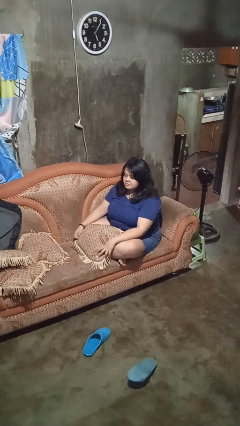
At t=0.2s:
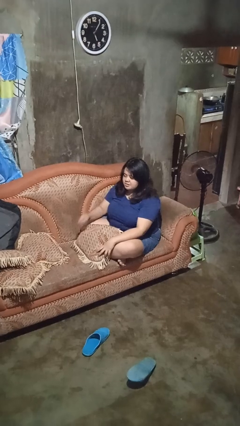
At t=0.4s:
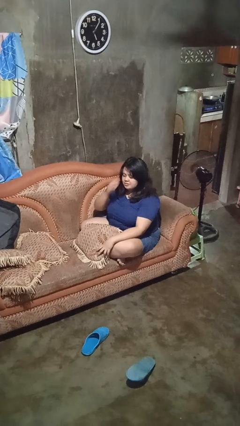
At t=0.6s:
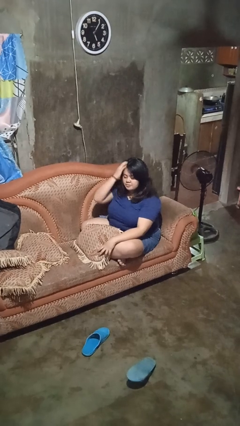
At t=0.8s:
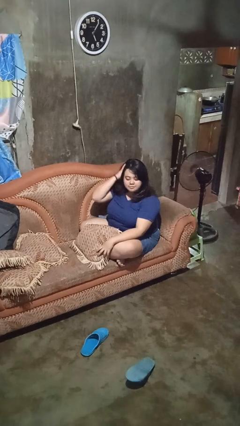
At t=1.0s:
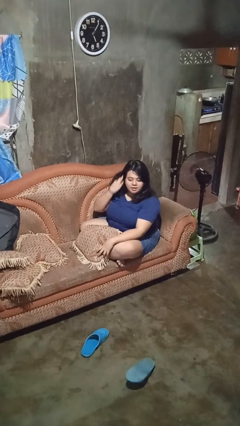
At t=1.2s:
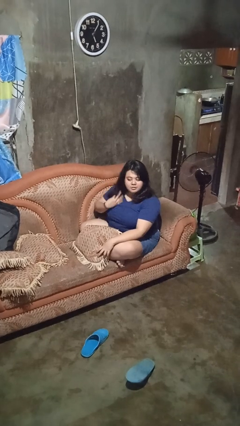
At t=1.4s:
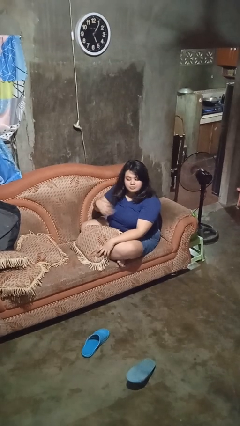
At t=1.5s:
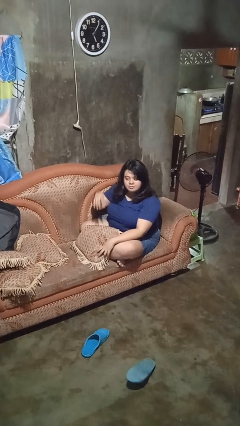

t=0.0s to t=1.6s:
person strokes hair

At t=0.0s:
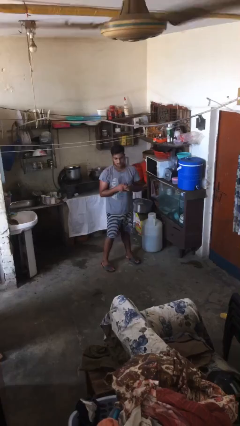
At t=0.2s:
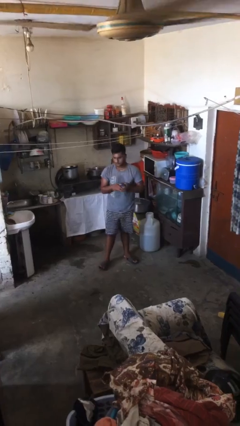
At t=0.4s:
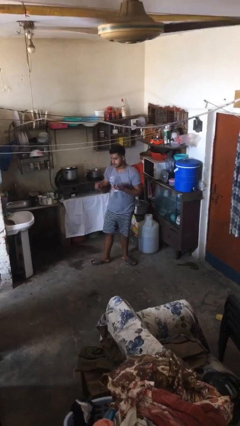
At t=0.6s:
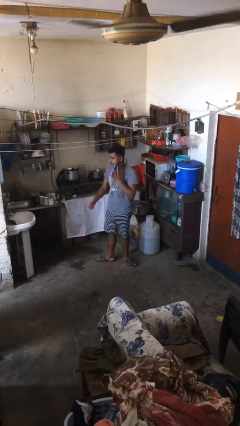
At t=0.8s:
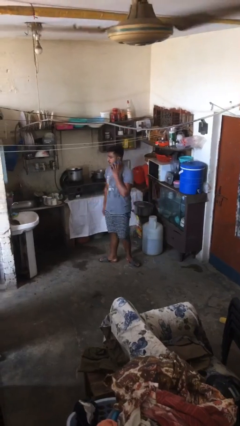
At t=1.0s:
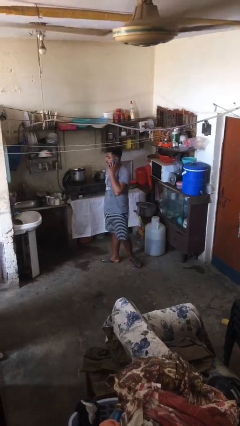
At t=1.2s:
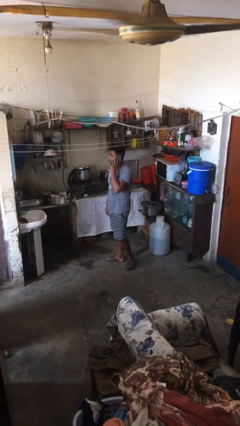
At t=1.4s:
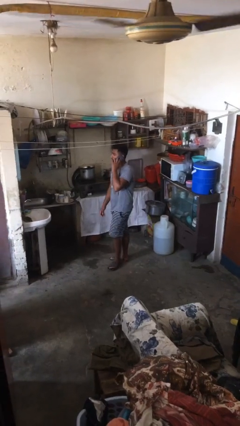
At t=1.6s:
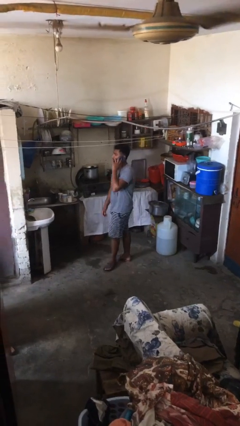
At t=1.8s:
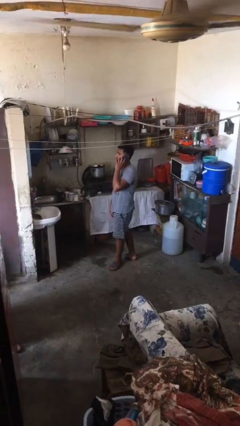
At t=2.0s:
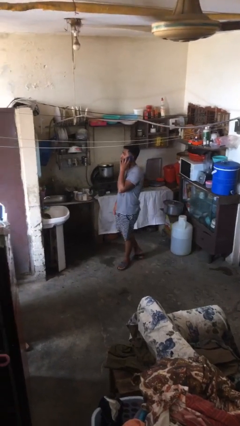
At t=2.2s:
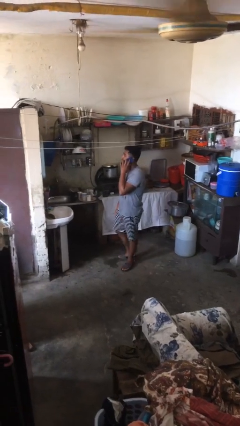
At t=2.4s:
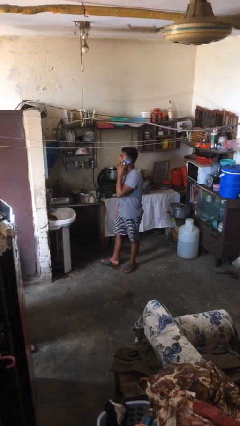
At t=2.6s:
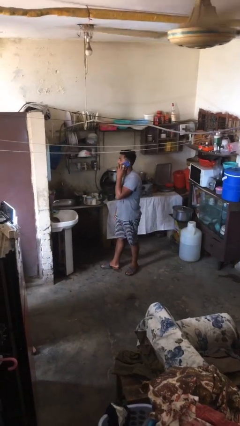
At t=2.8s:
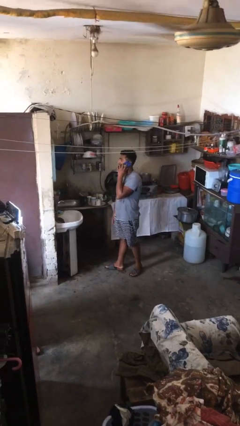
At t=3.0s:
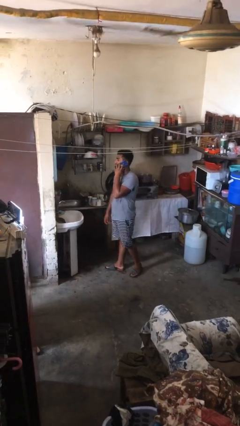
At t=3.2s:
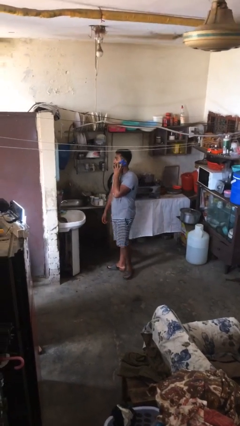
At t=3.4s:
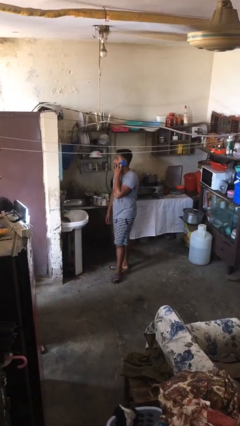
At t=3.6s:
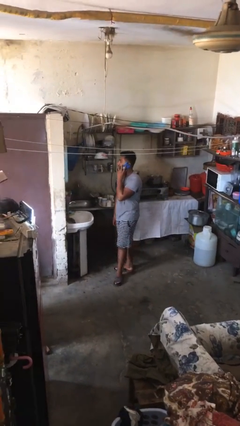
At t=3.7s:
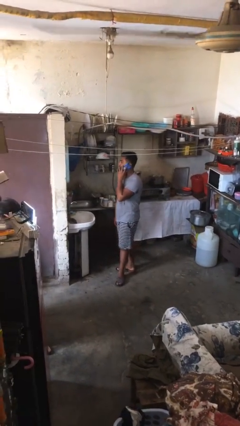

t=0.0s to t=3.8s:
person talks on phone

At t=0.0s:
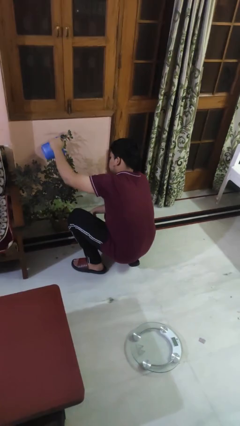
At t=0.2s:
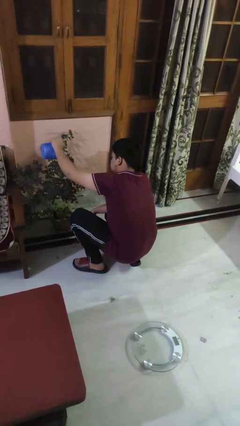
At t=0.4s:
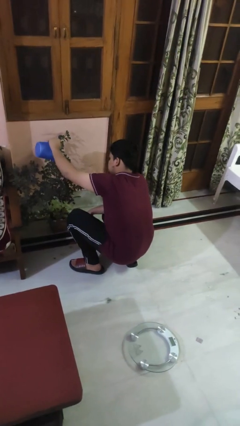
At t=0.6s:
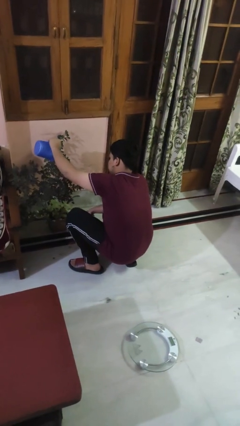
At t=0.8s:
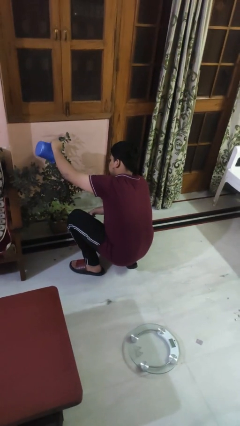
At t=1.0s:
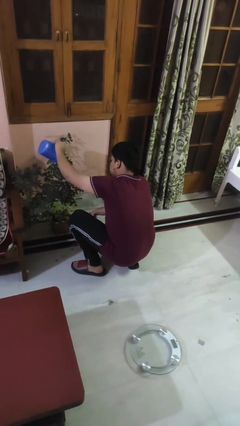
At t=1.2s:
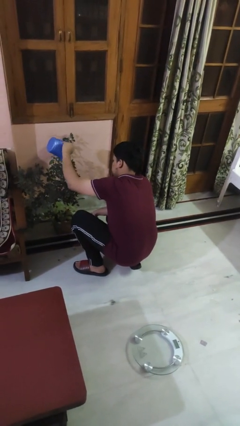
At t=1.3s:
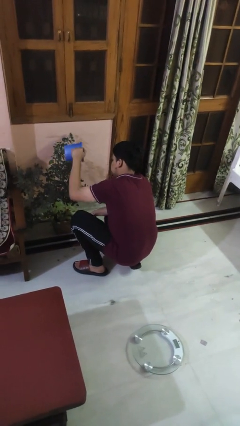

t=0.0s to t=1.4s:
person waters houseplant

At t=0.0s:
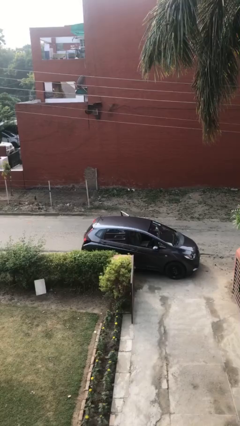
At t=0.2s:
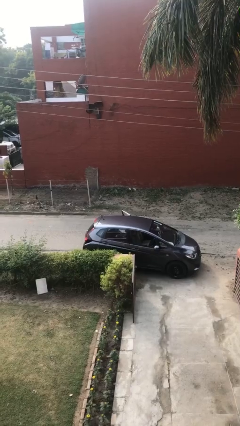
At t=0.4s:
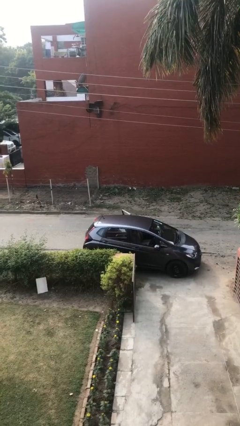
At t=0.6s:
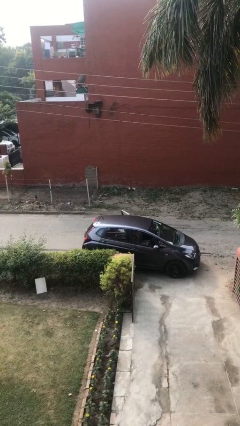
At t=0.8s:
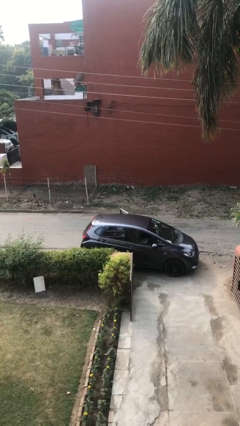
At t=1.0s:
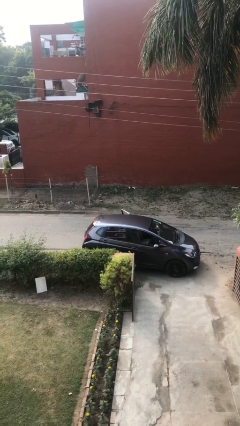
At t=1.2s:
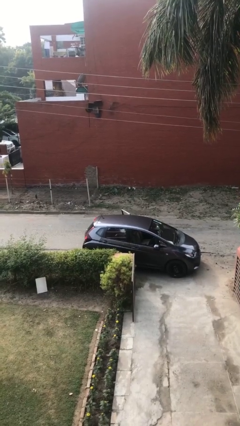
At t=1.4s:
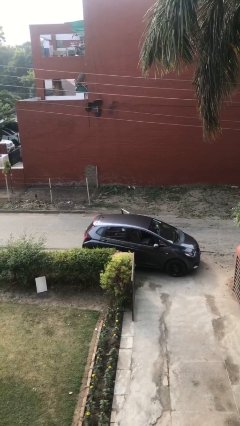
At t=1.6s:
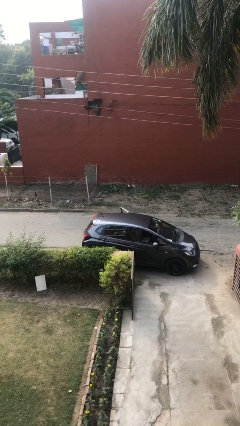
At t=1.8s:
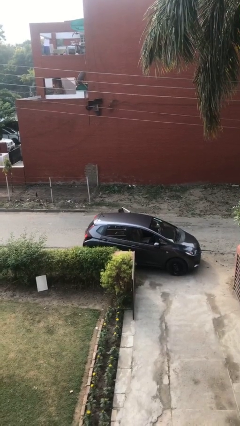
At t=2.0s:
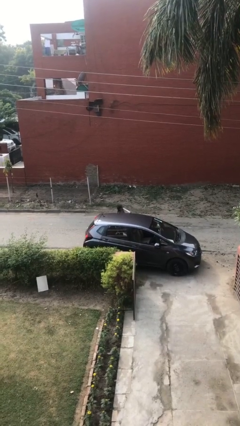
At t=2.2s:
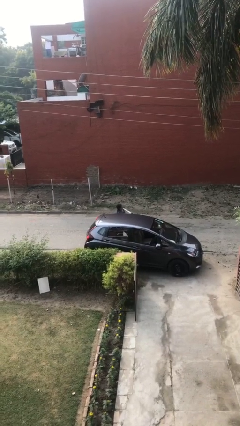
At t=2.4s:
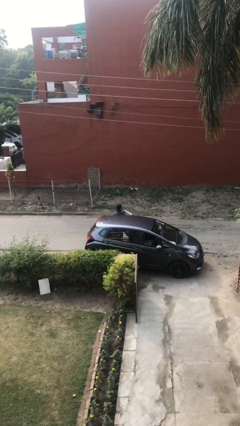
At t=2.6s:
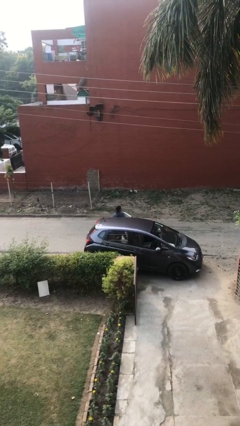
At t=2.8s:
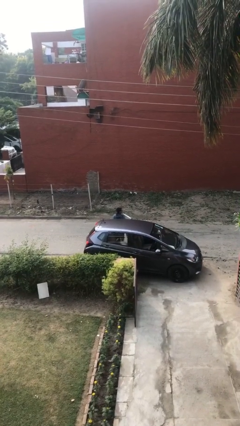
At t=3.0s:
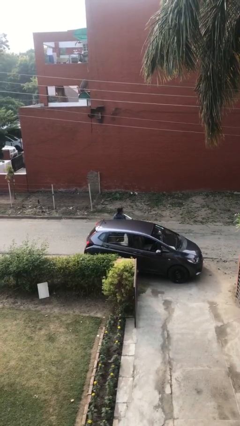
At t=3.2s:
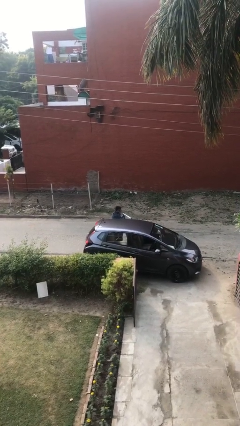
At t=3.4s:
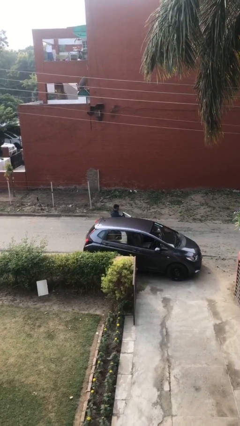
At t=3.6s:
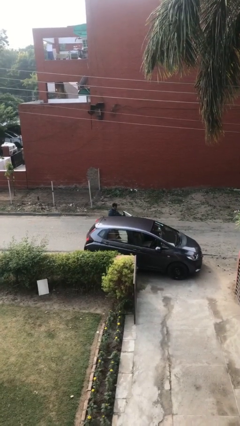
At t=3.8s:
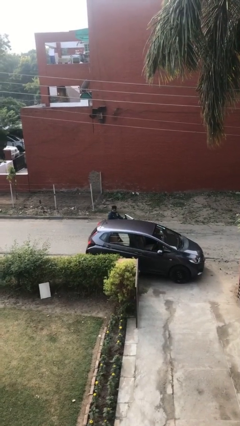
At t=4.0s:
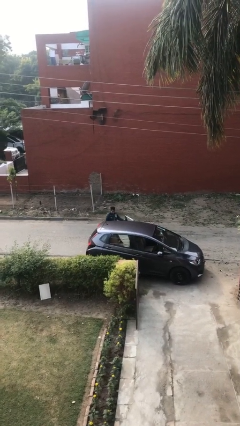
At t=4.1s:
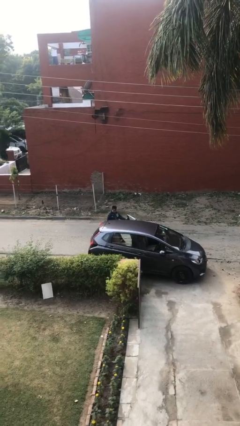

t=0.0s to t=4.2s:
person exits car

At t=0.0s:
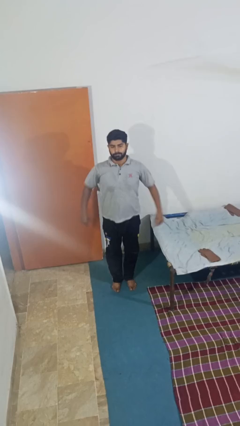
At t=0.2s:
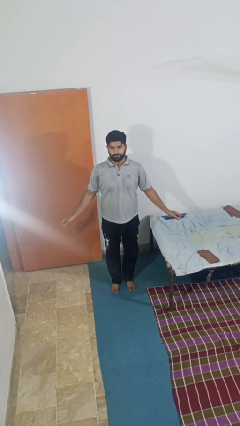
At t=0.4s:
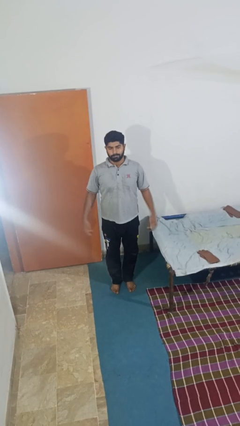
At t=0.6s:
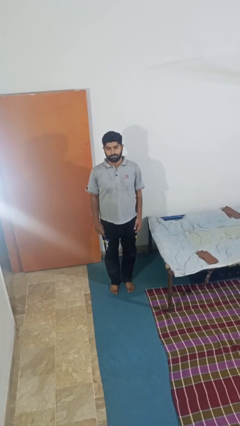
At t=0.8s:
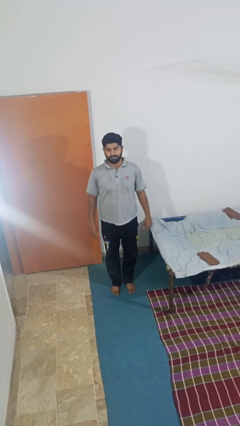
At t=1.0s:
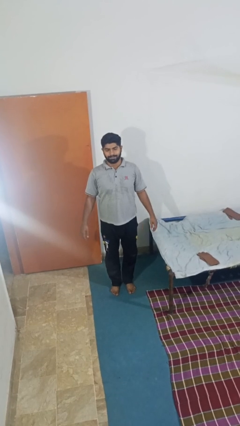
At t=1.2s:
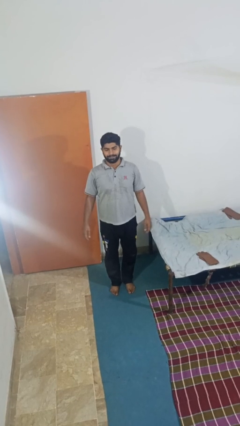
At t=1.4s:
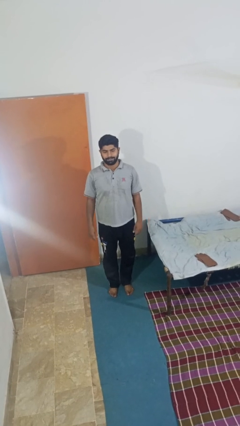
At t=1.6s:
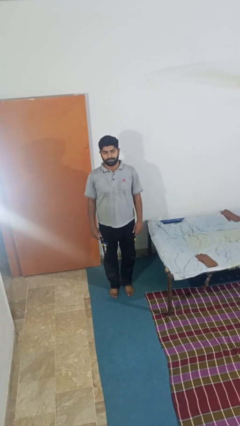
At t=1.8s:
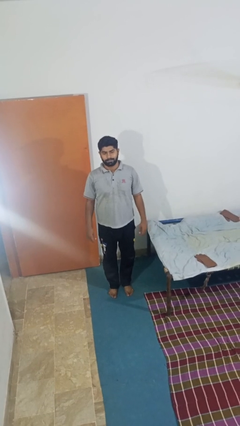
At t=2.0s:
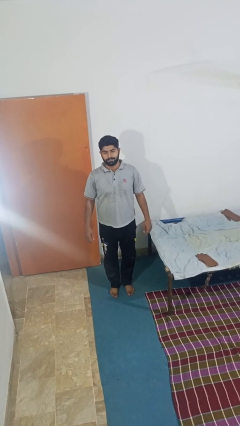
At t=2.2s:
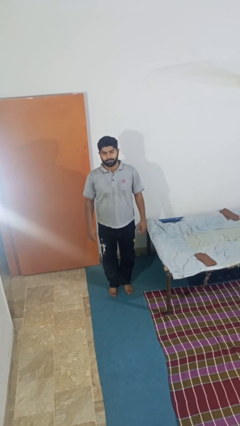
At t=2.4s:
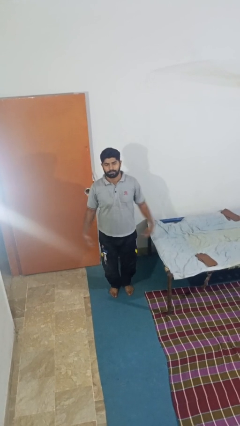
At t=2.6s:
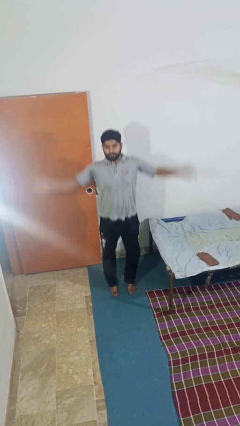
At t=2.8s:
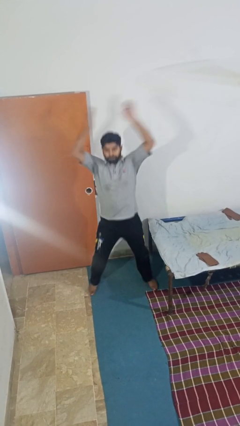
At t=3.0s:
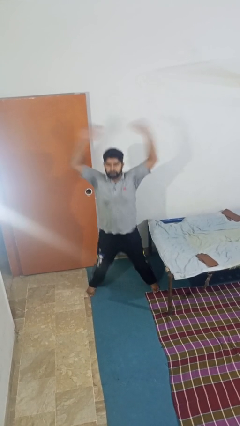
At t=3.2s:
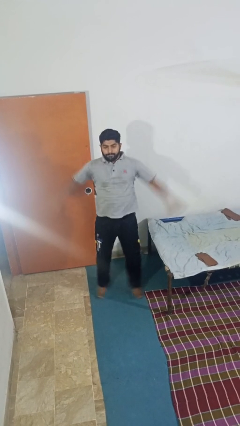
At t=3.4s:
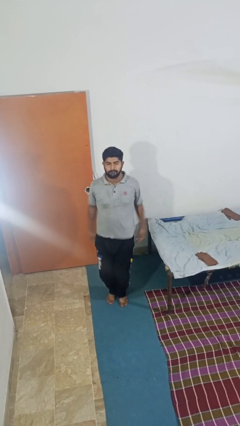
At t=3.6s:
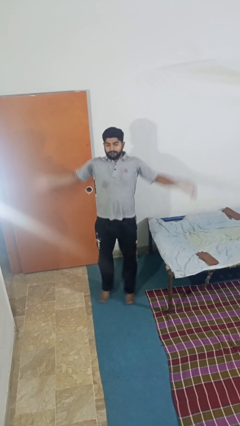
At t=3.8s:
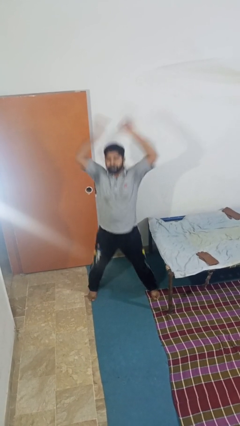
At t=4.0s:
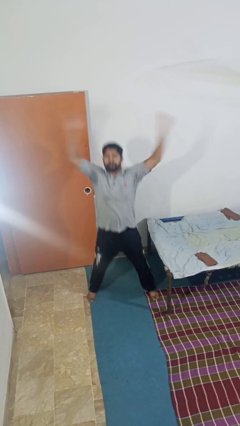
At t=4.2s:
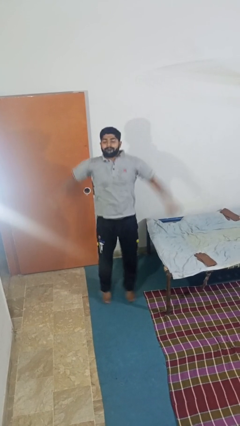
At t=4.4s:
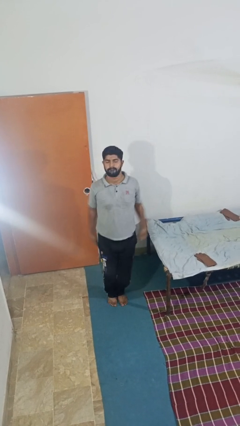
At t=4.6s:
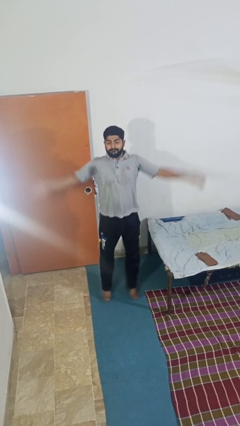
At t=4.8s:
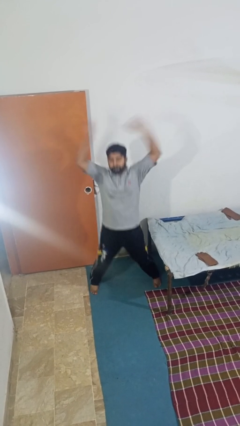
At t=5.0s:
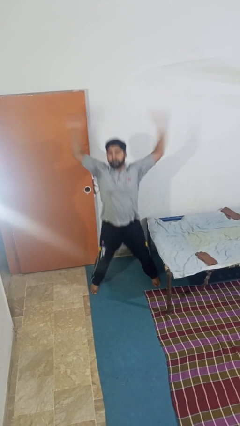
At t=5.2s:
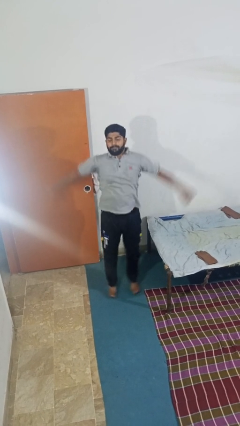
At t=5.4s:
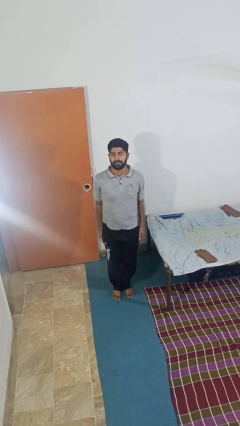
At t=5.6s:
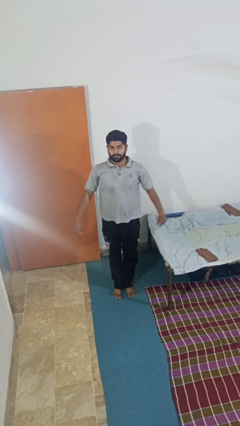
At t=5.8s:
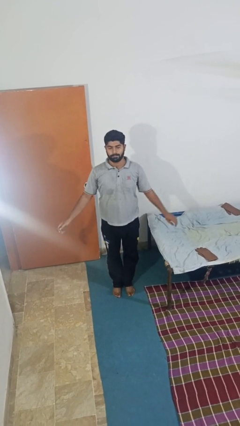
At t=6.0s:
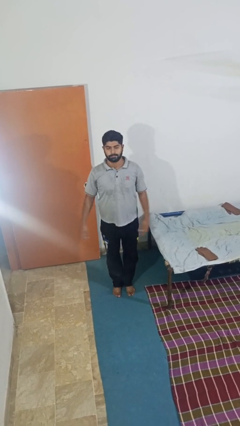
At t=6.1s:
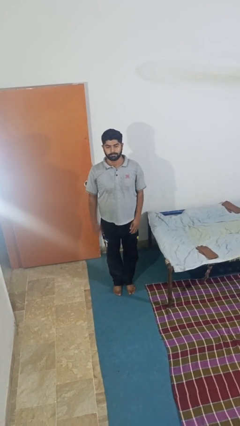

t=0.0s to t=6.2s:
person exercises with jumping jacks

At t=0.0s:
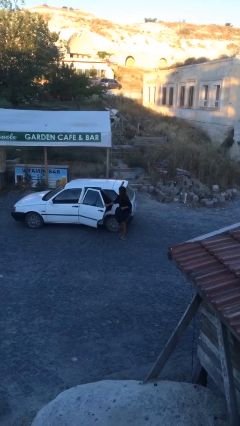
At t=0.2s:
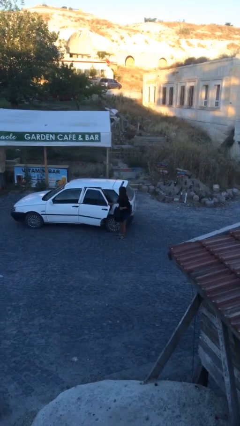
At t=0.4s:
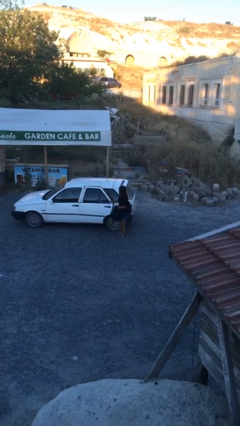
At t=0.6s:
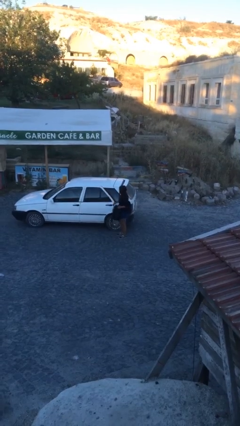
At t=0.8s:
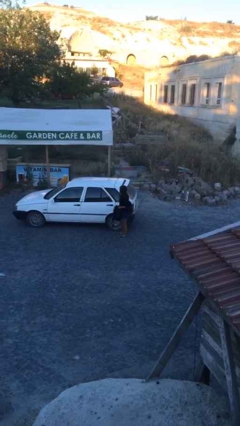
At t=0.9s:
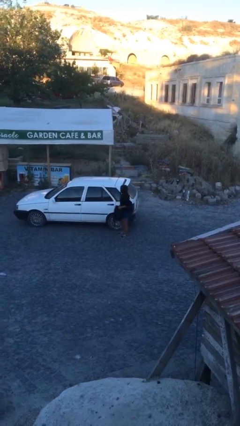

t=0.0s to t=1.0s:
person closes car door
